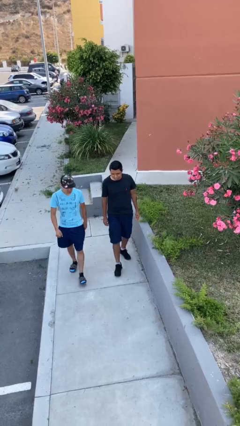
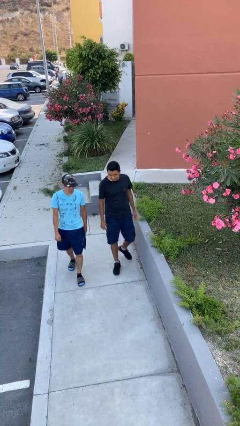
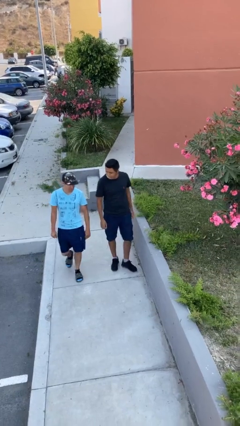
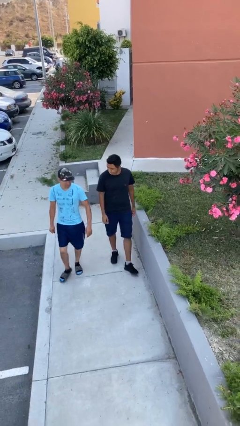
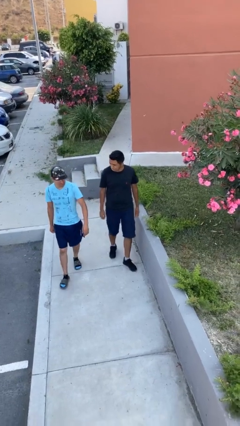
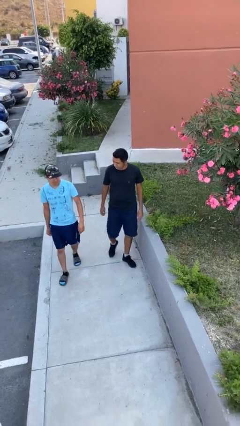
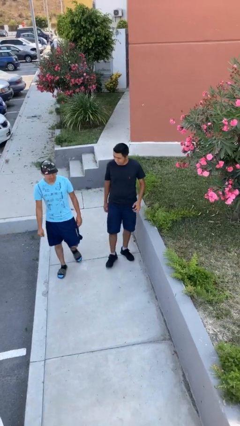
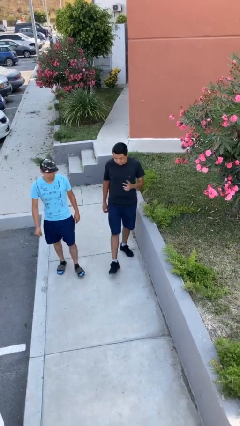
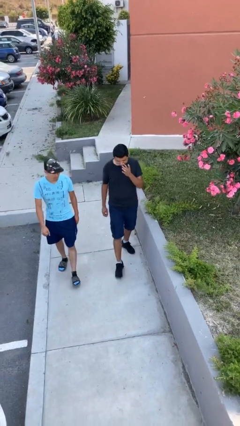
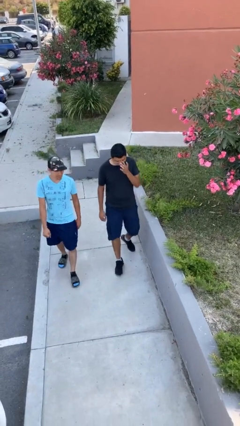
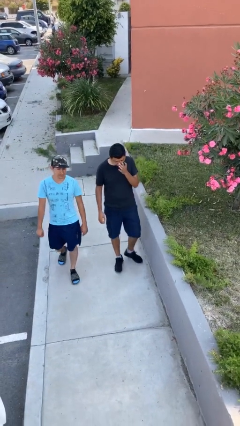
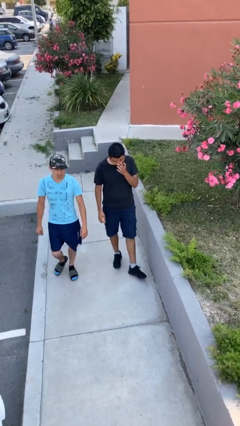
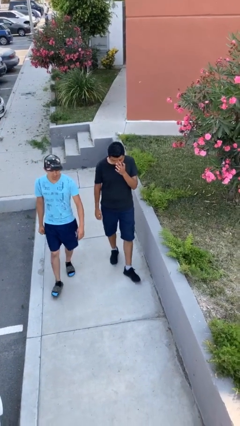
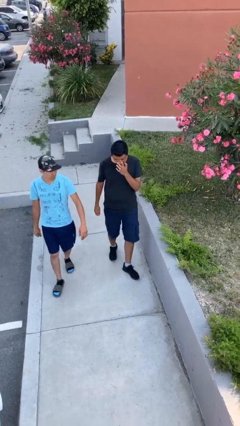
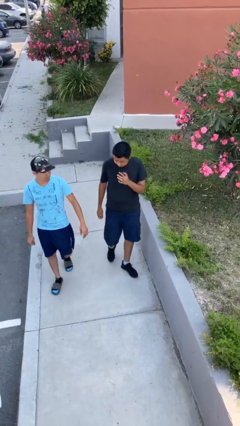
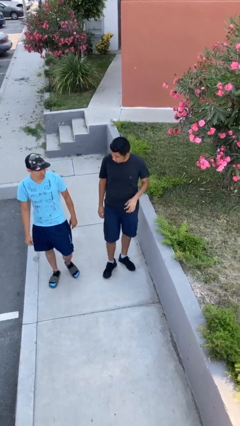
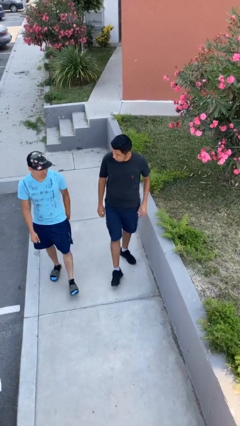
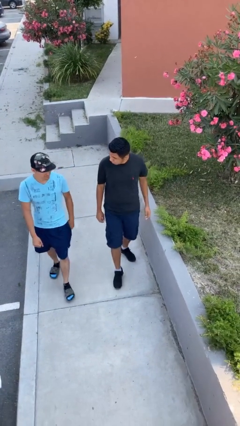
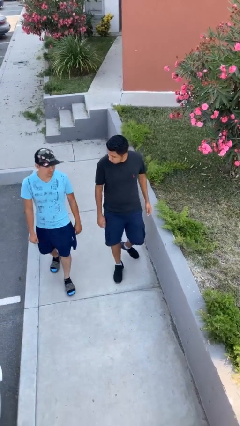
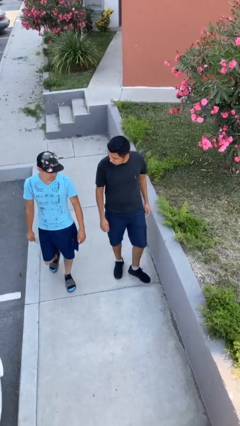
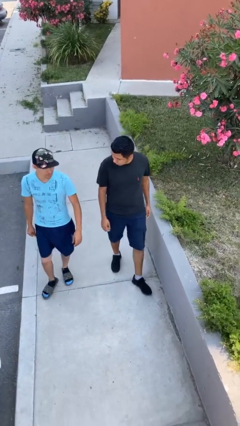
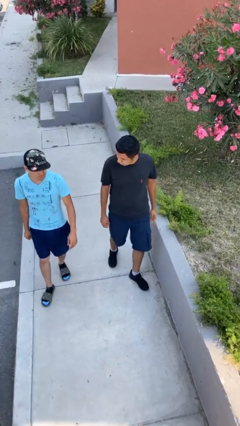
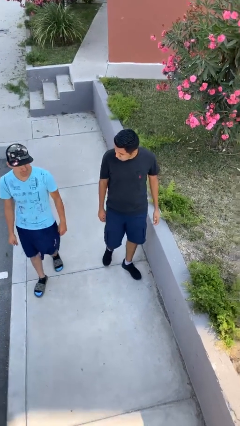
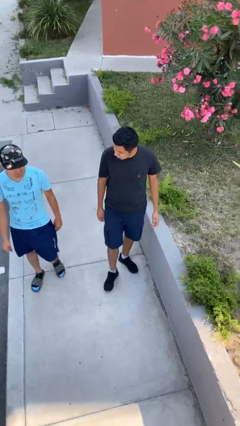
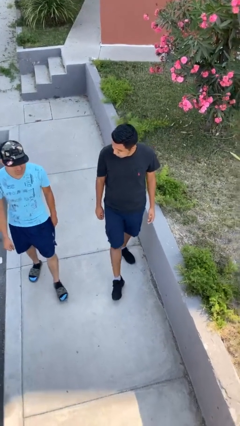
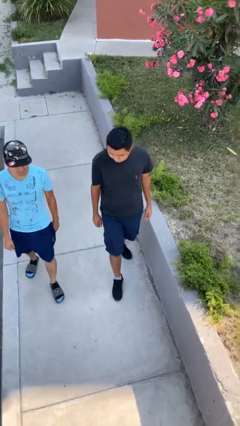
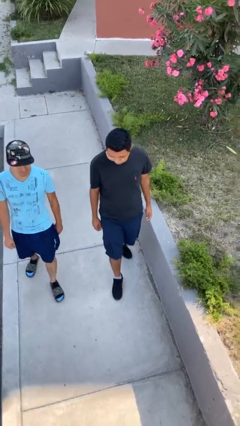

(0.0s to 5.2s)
person talks to person

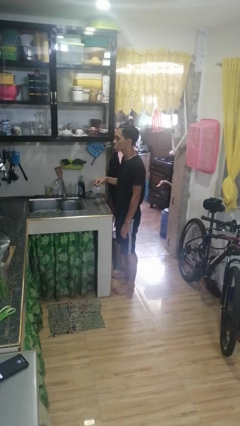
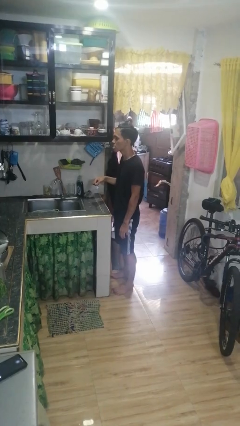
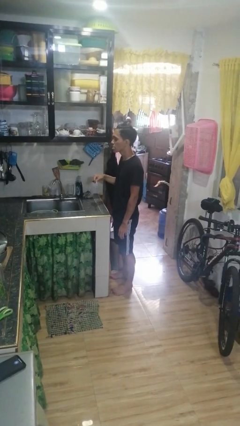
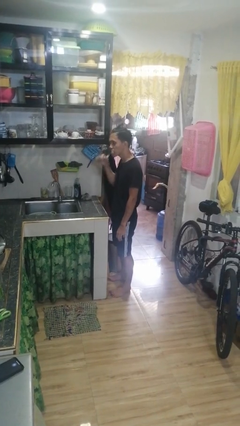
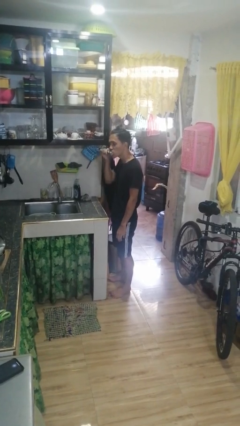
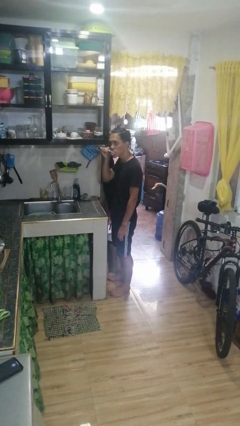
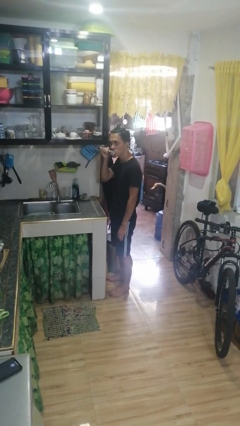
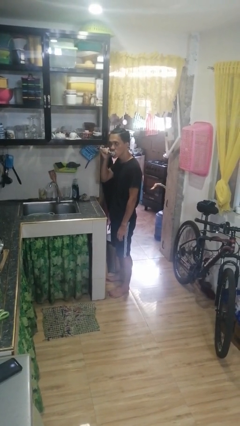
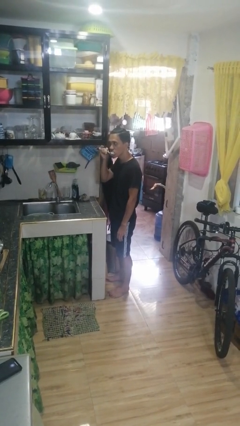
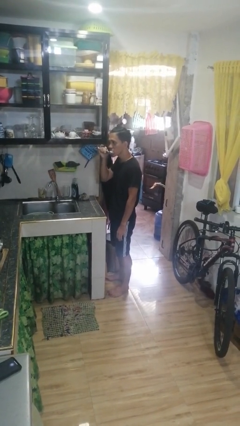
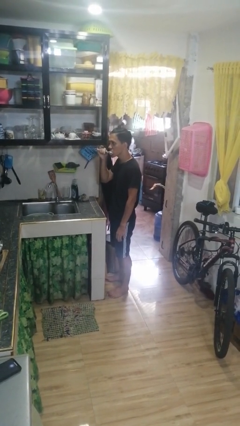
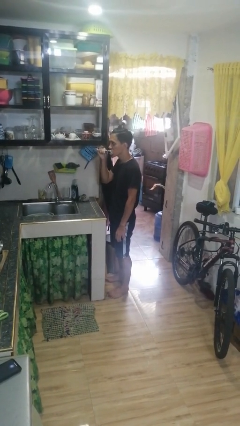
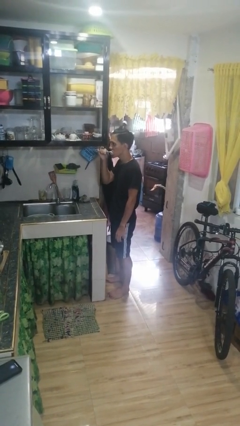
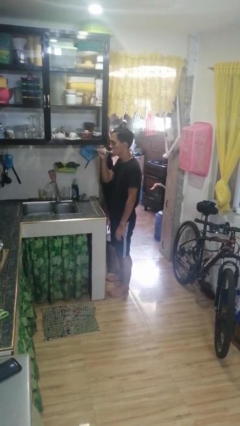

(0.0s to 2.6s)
person brushes teeth

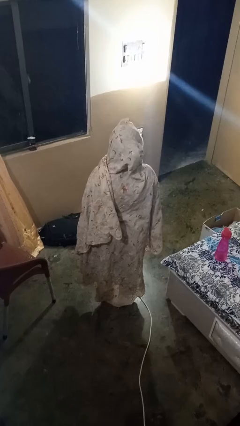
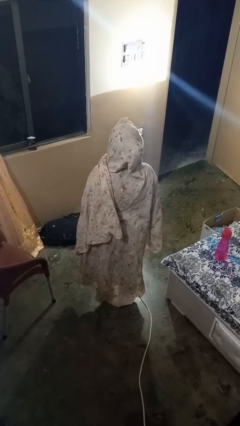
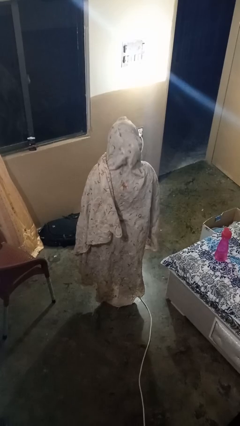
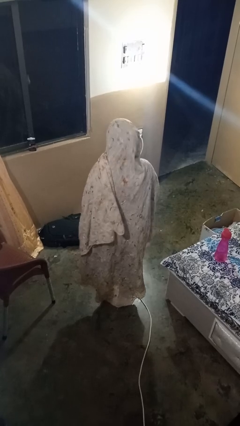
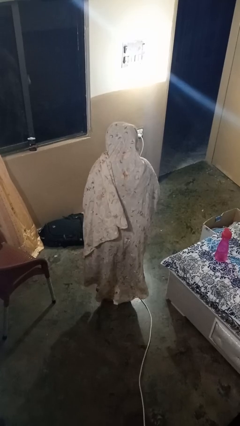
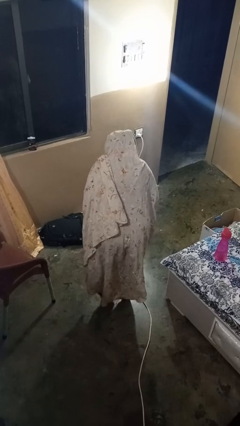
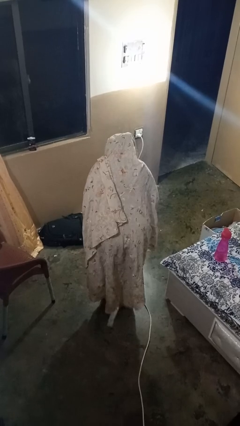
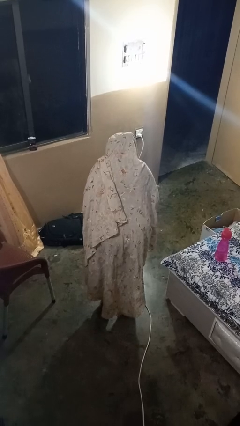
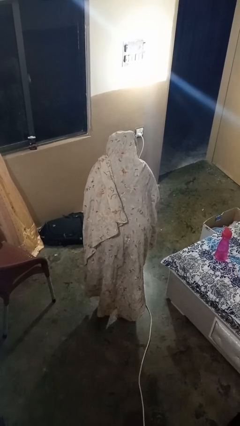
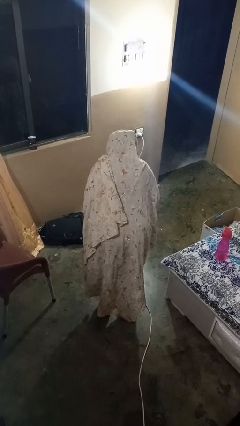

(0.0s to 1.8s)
person bows

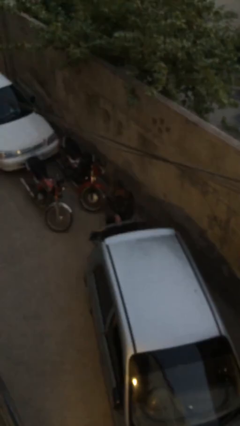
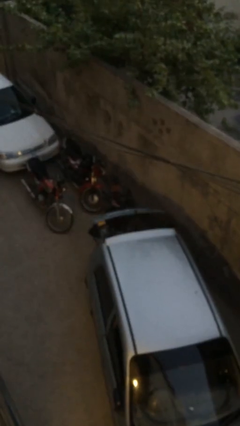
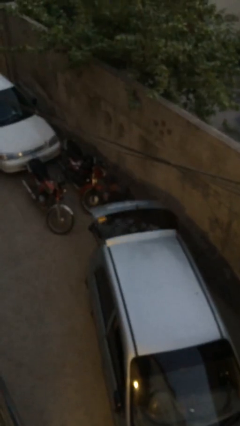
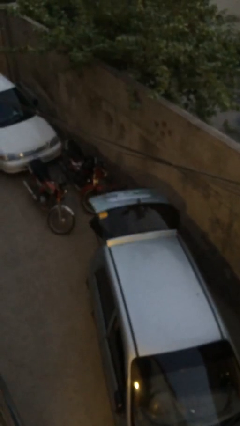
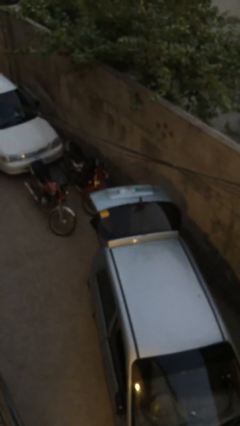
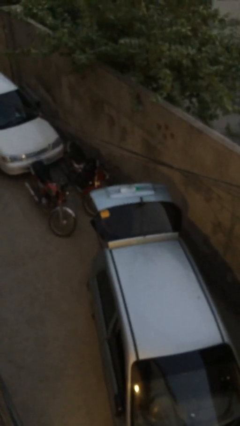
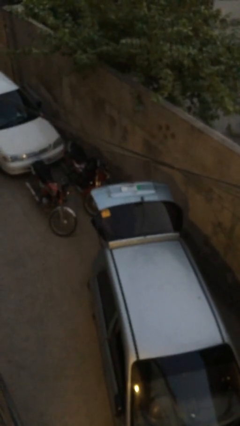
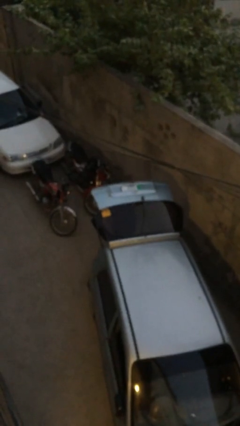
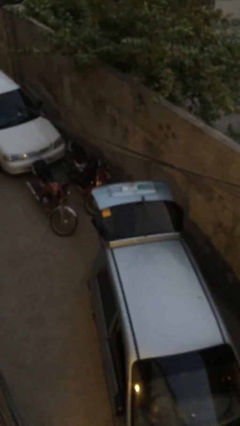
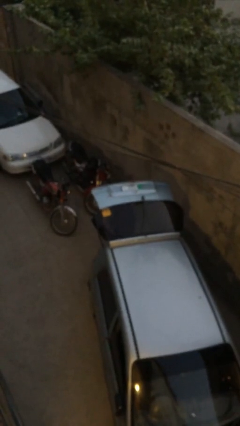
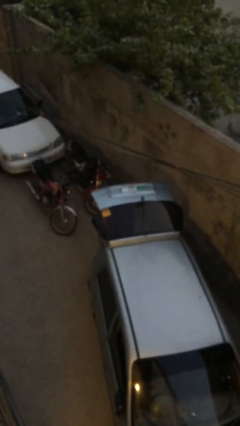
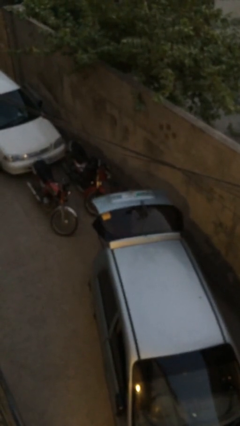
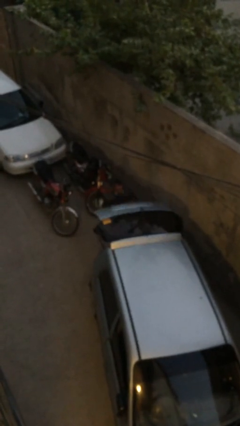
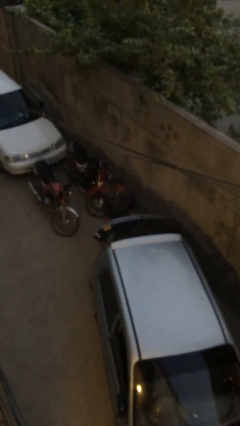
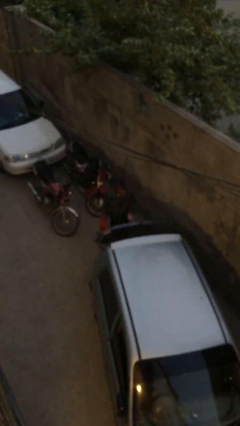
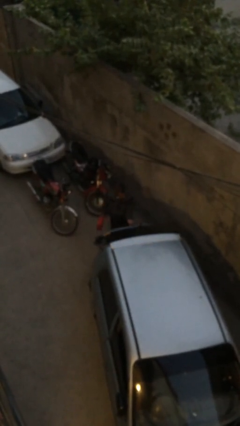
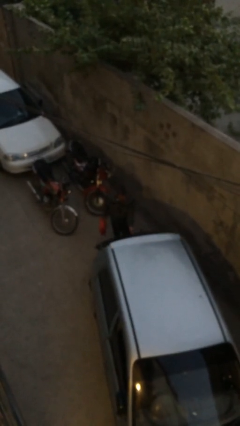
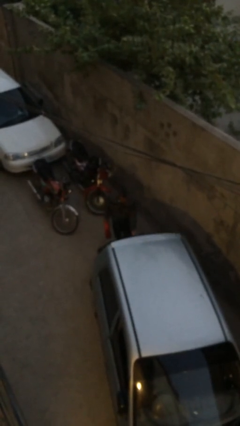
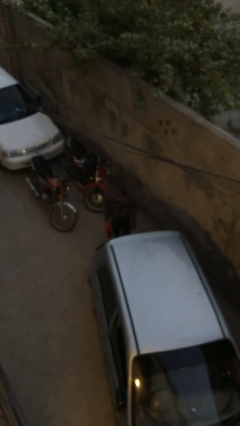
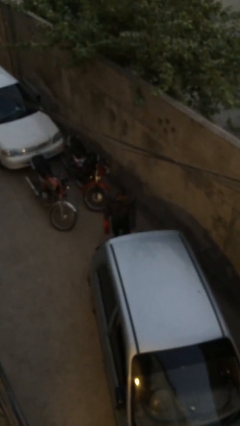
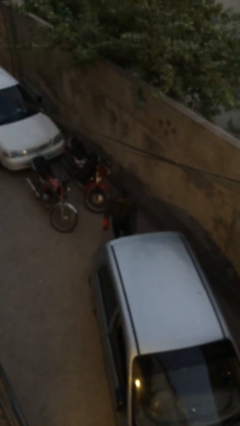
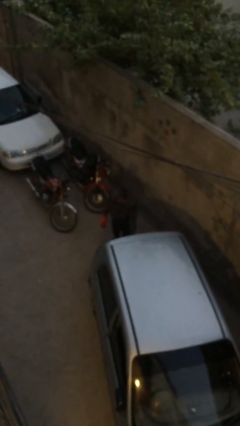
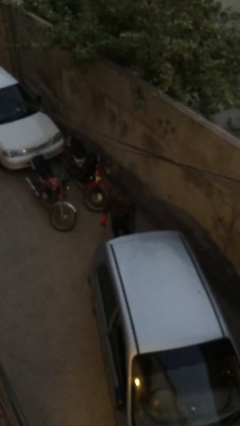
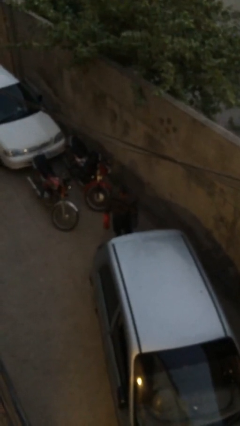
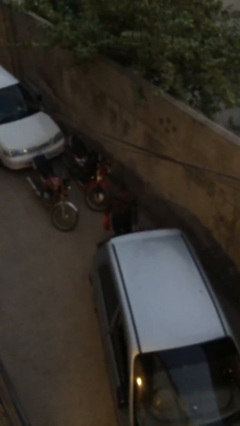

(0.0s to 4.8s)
person unloads car

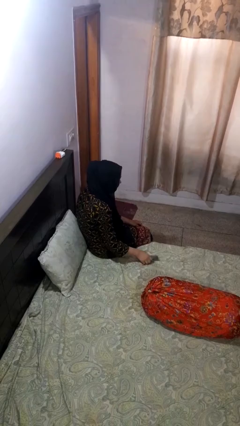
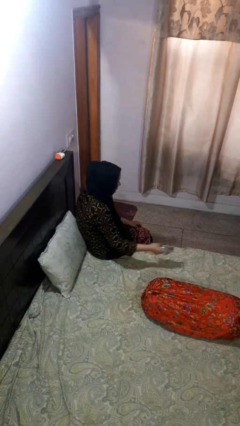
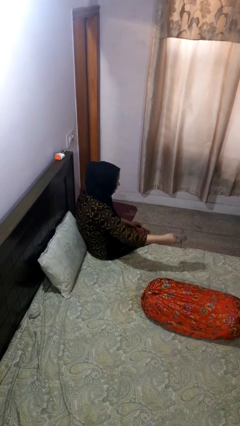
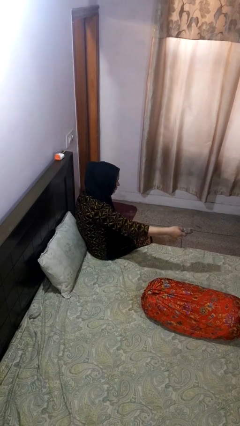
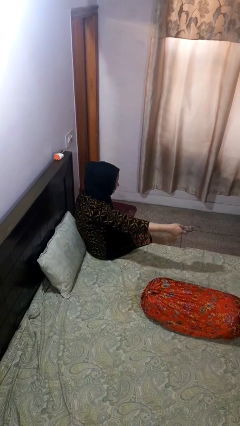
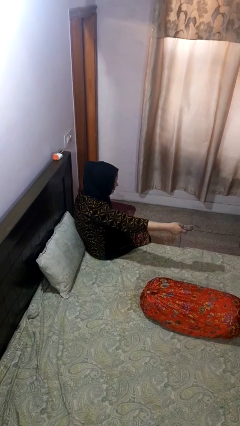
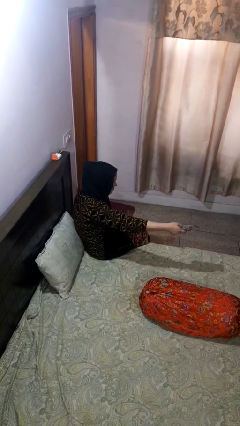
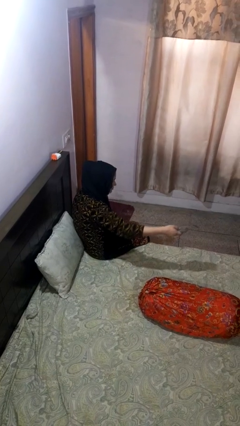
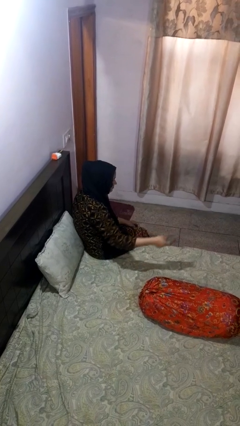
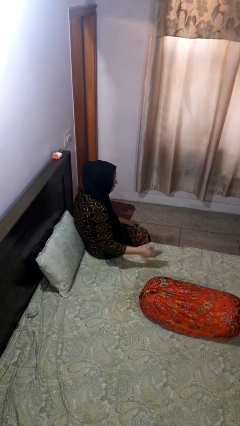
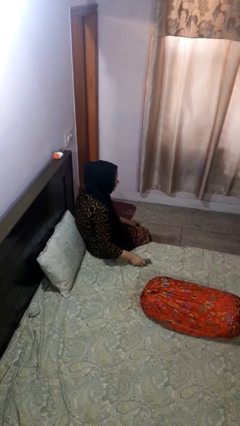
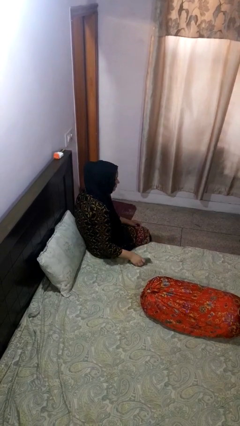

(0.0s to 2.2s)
person uses television remote

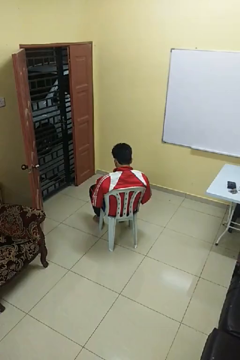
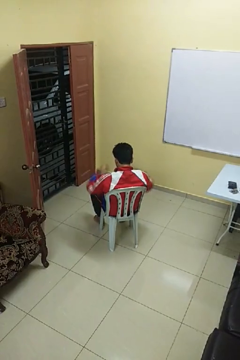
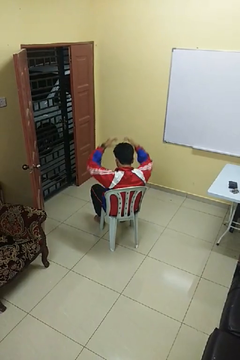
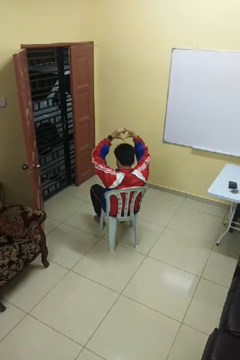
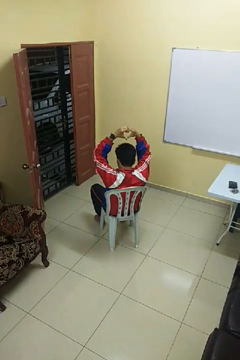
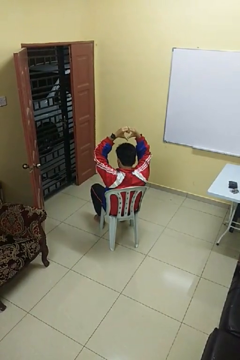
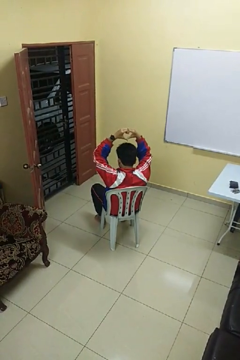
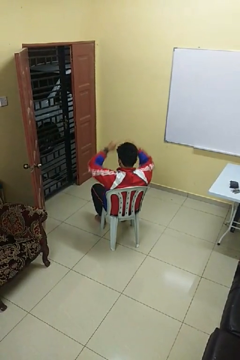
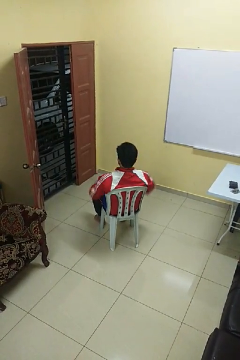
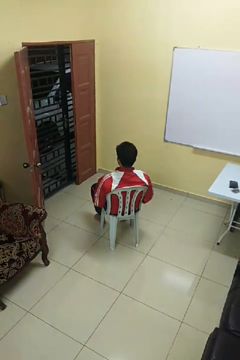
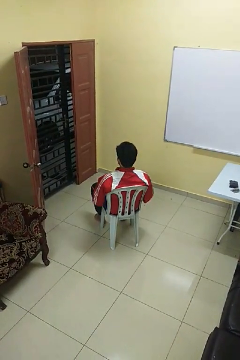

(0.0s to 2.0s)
person gestures heart
